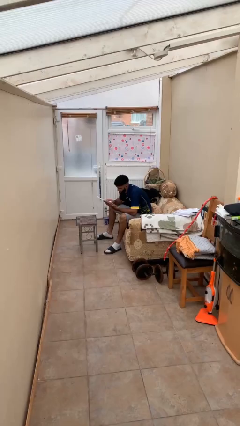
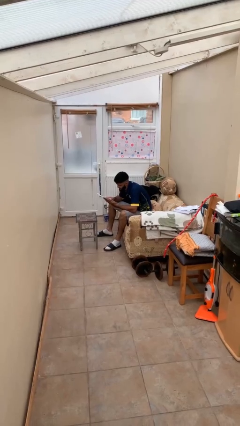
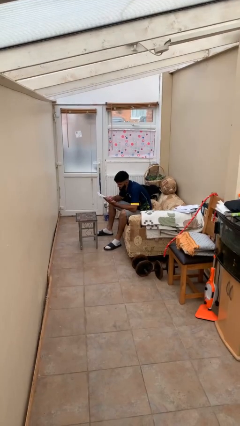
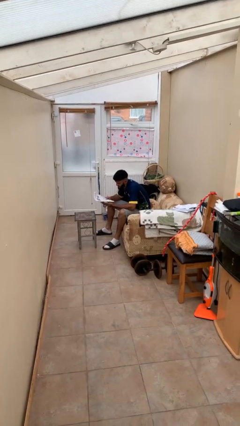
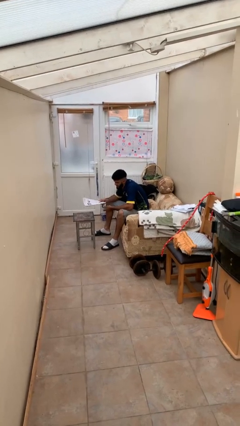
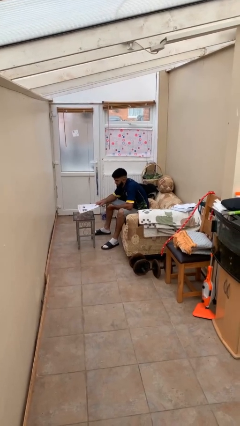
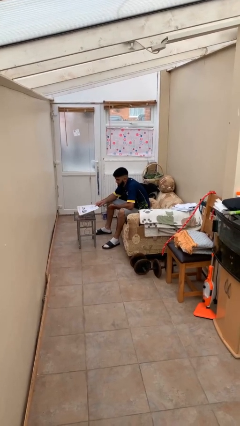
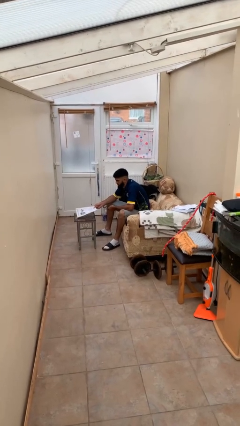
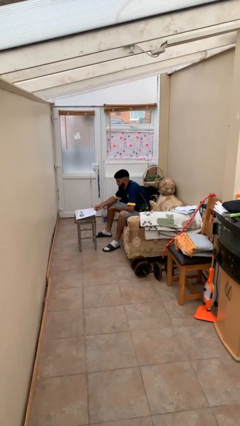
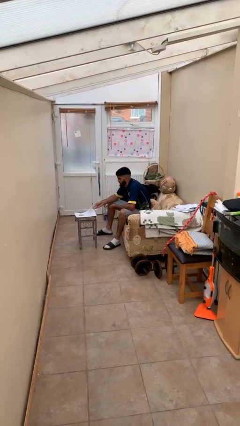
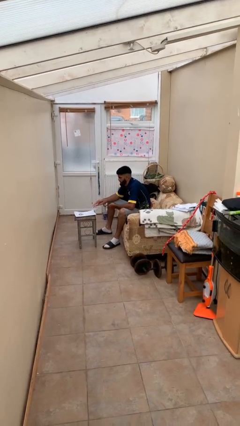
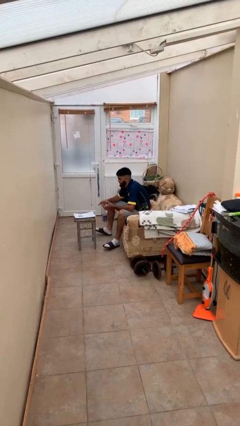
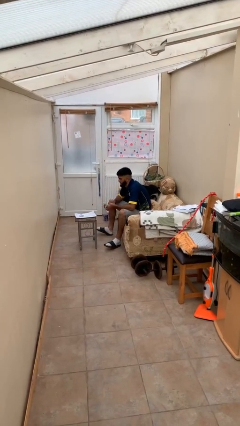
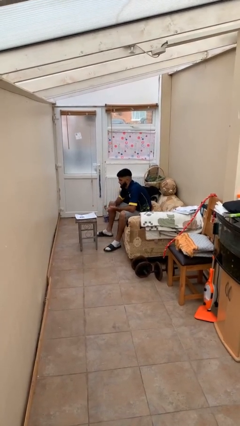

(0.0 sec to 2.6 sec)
person puts down object on table

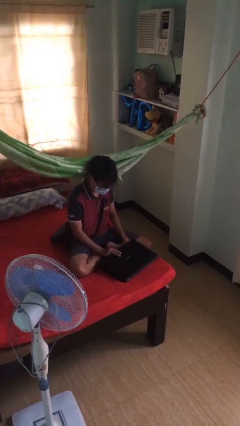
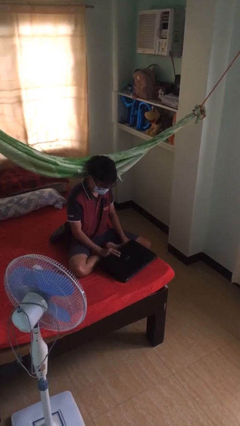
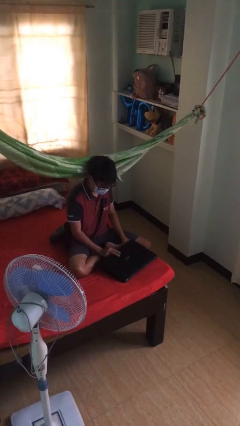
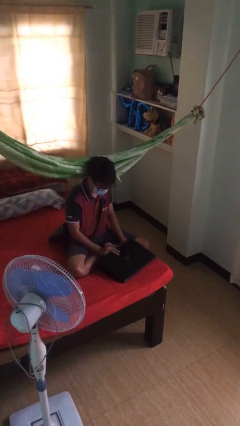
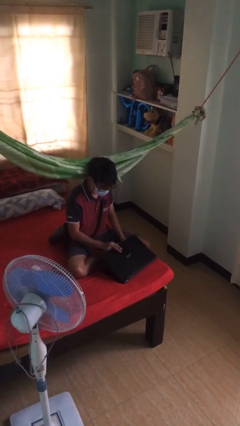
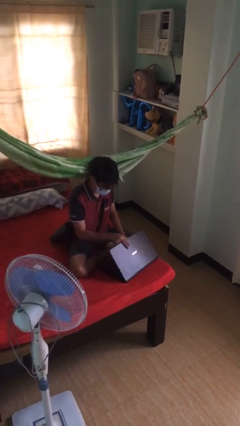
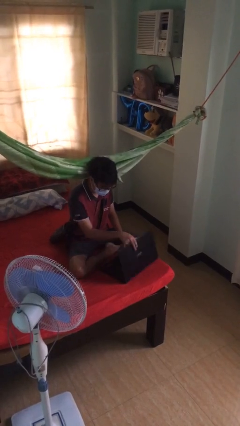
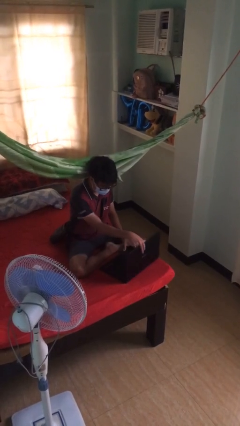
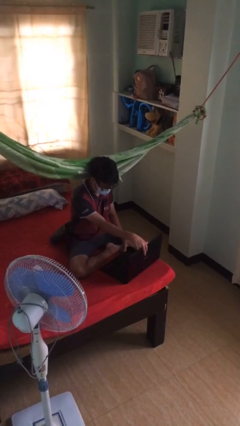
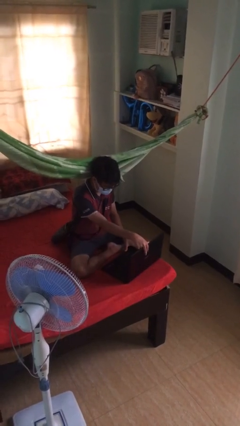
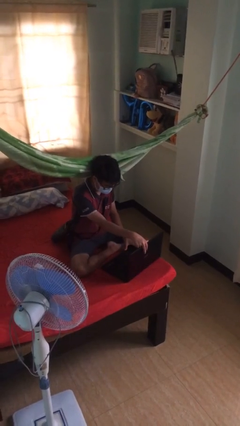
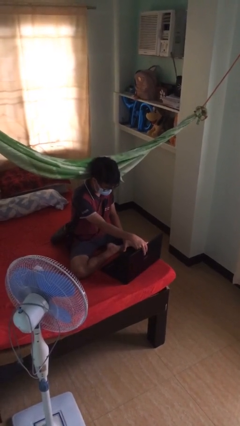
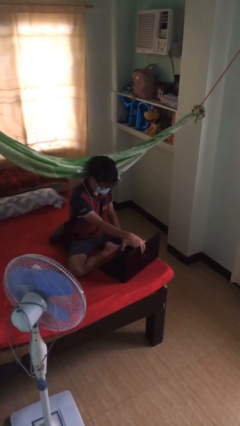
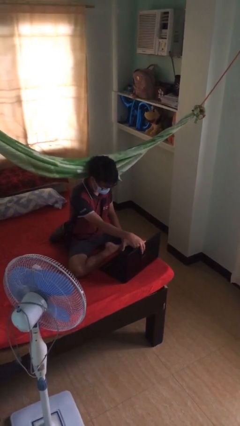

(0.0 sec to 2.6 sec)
person interacts with laptop

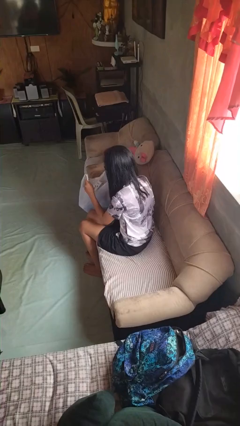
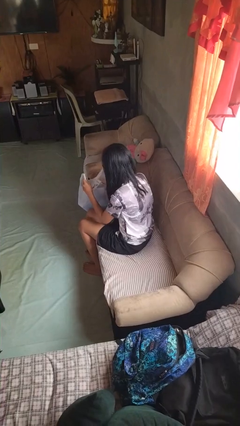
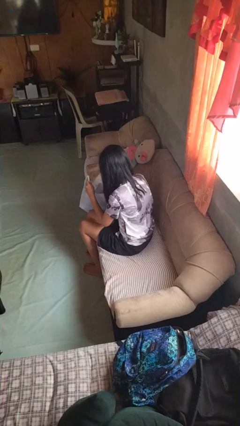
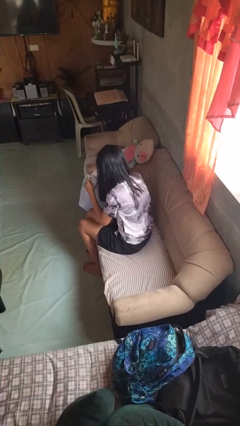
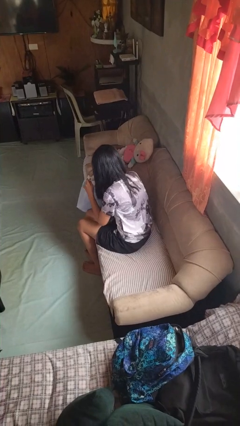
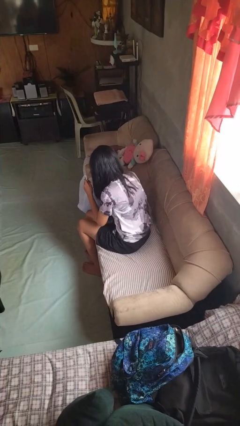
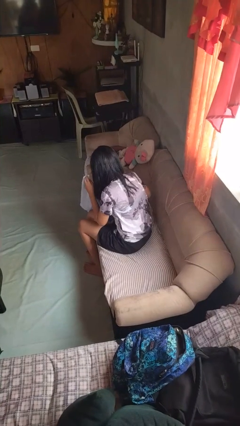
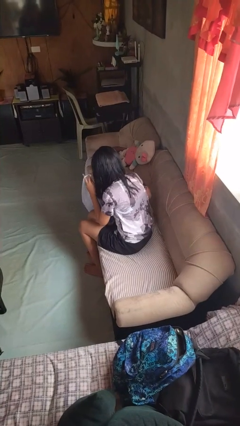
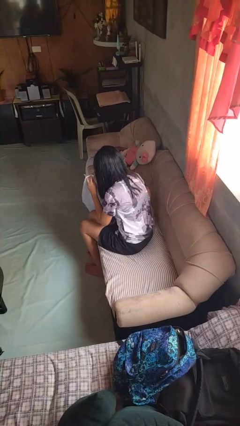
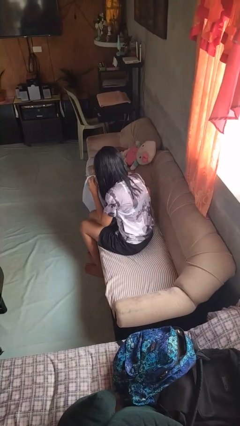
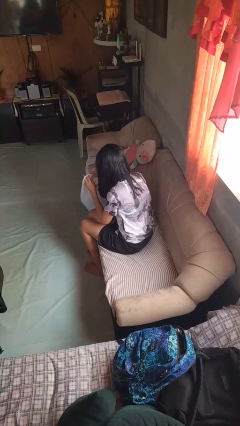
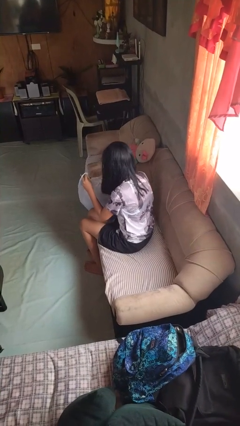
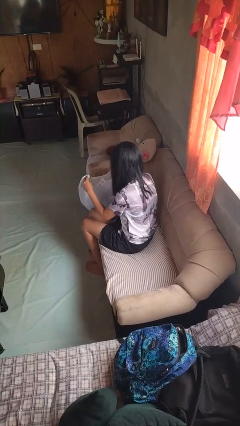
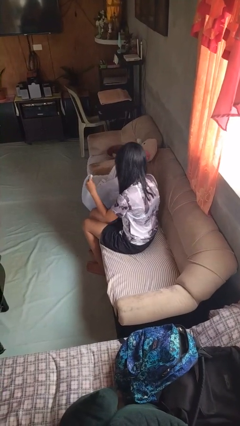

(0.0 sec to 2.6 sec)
person searches in bag

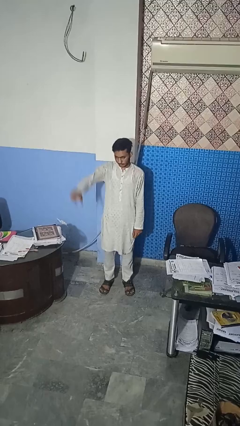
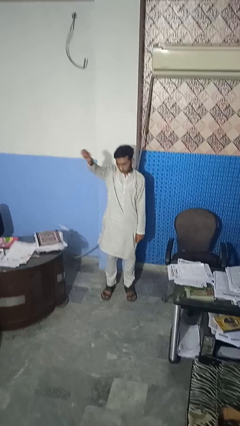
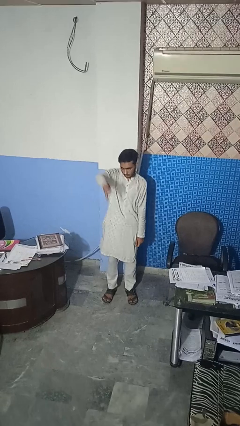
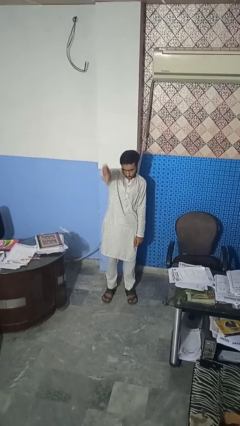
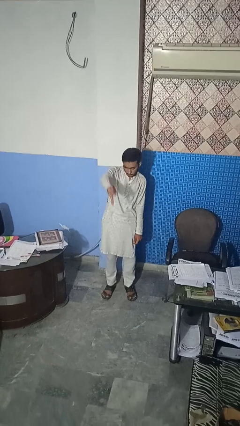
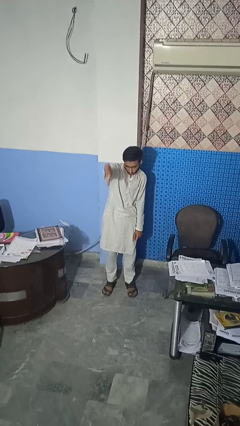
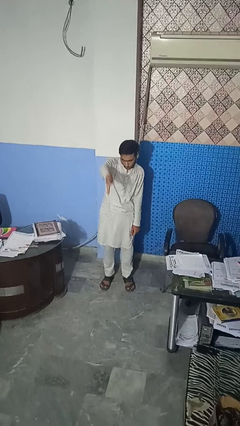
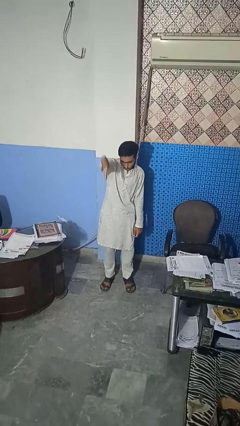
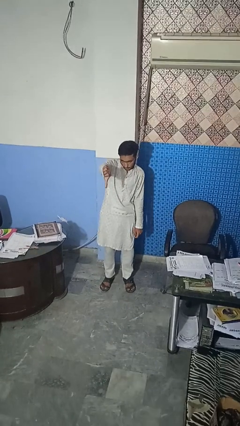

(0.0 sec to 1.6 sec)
person gestures thumbs down

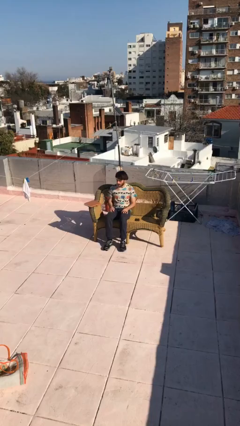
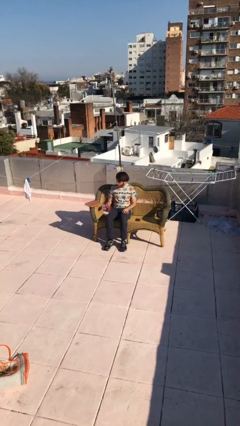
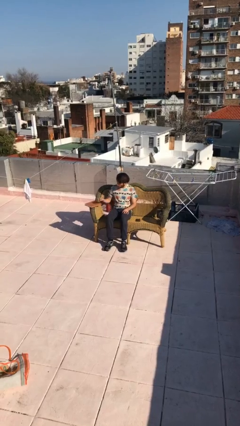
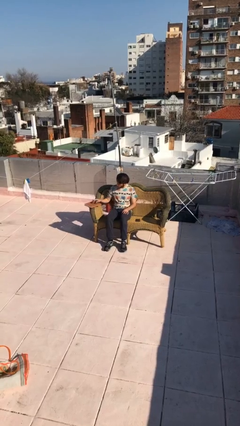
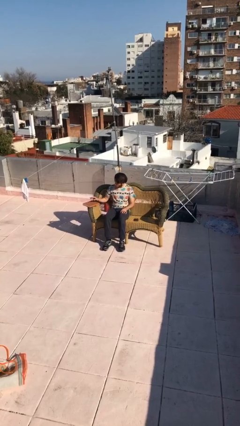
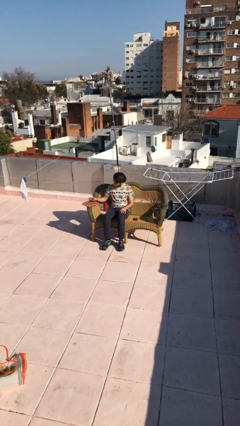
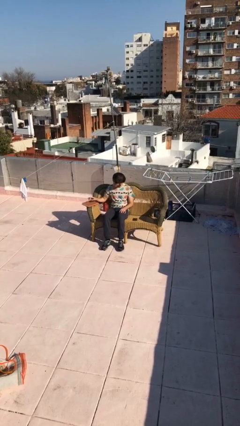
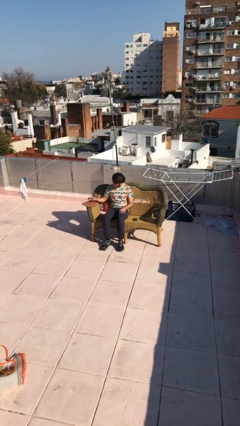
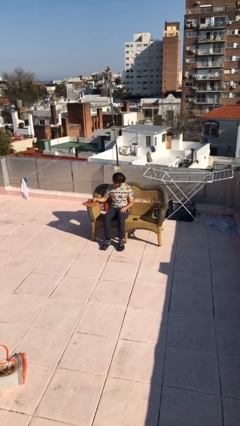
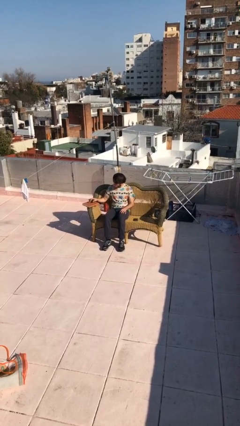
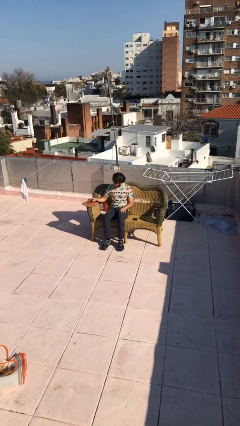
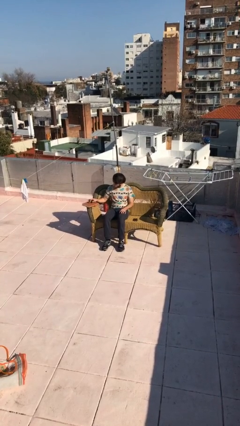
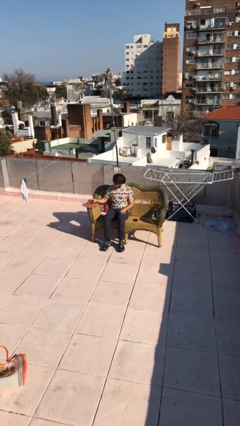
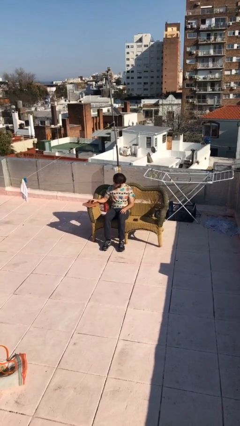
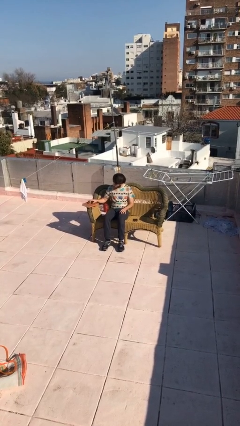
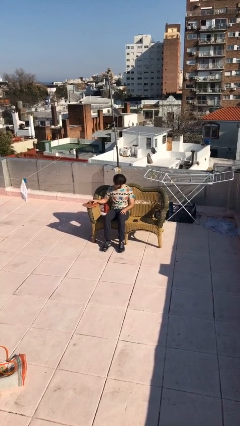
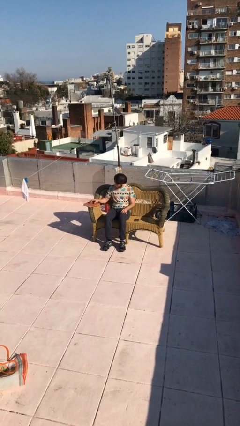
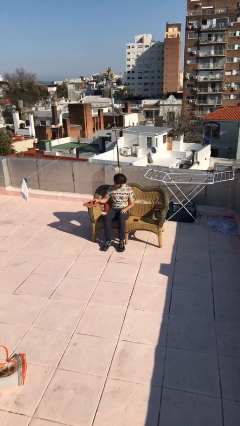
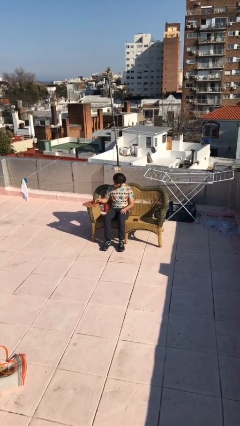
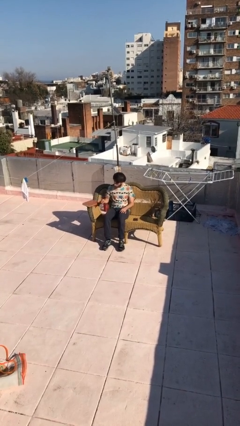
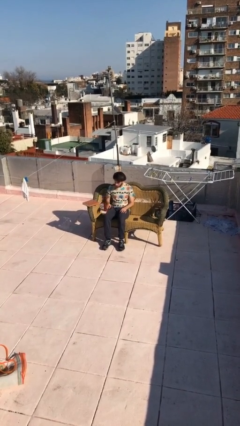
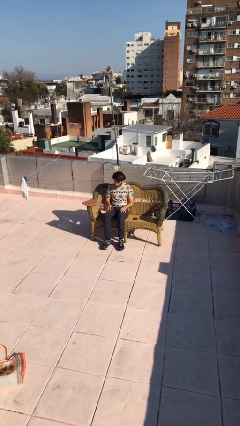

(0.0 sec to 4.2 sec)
person taps object with finger

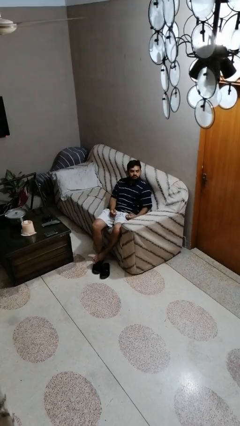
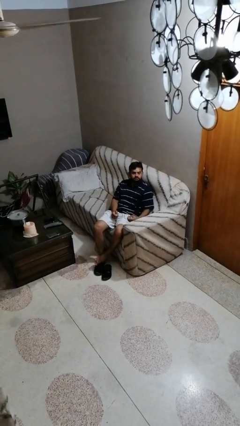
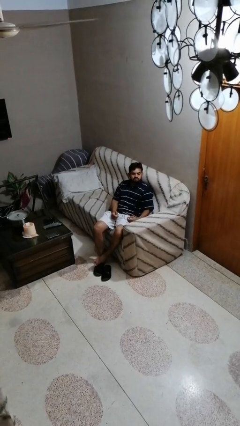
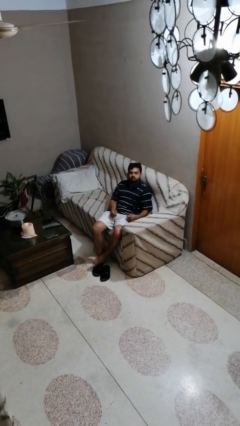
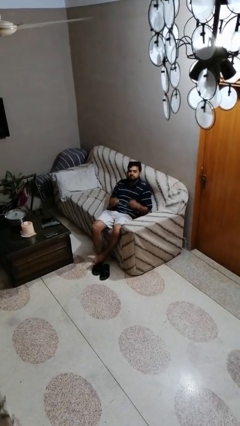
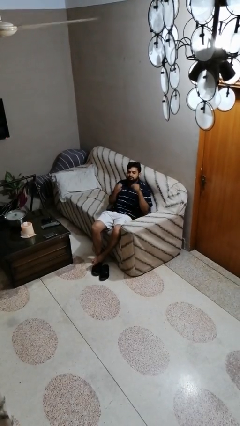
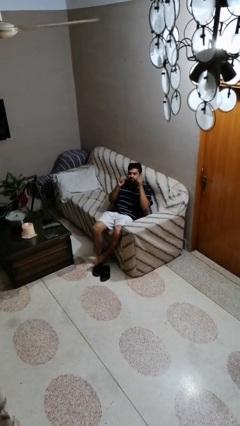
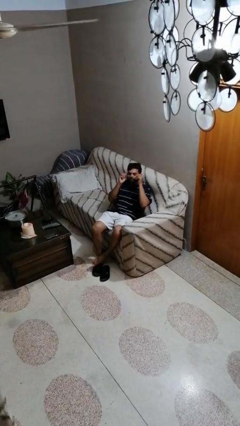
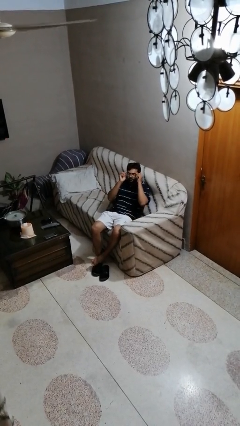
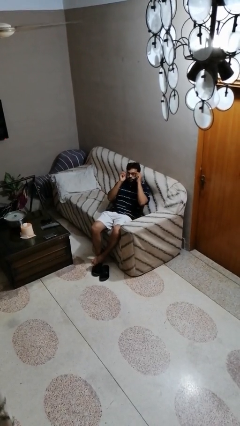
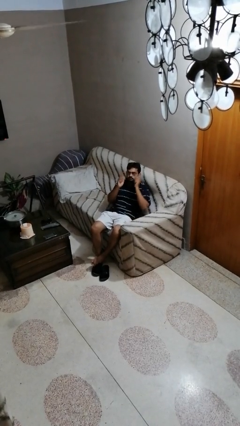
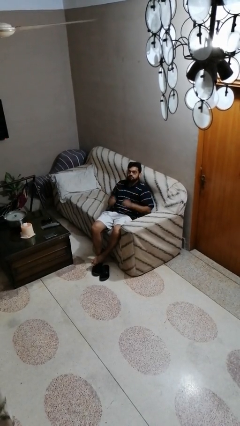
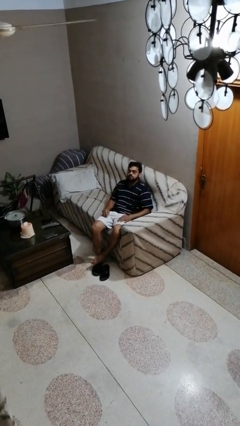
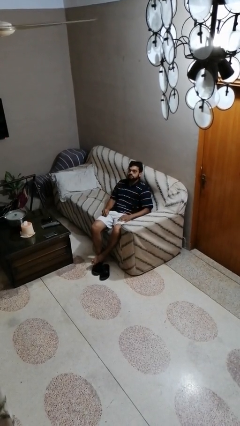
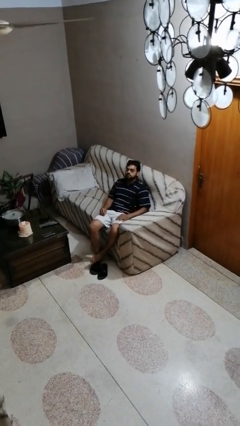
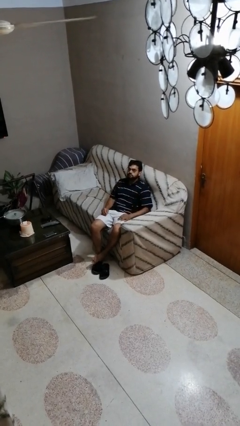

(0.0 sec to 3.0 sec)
person puts on glasses

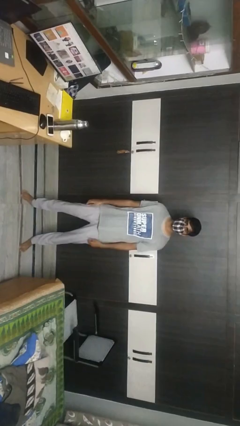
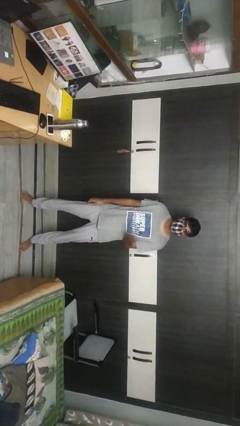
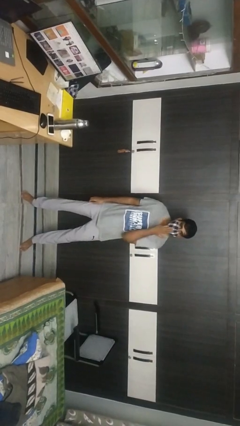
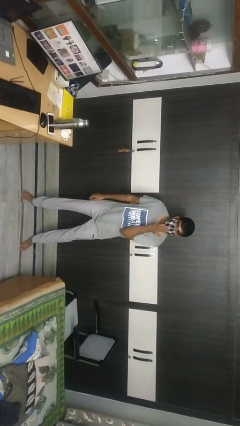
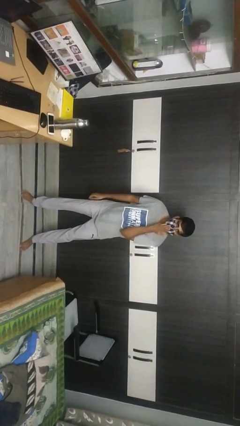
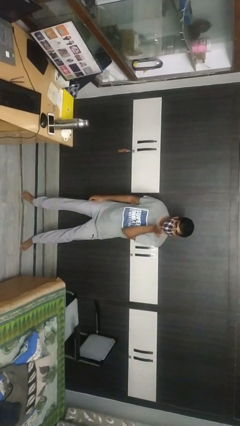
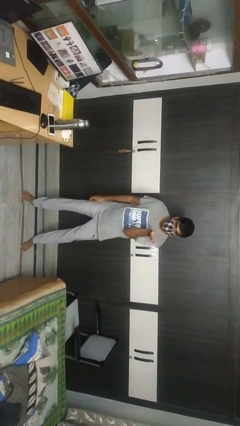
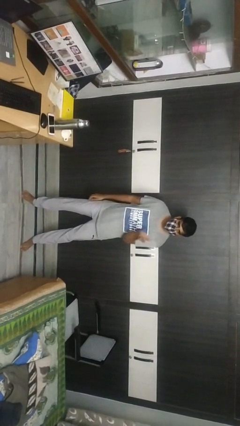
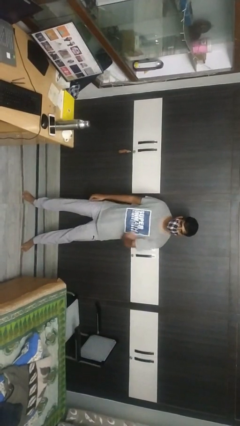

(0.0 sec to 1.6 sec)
person gestures blow kiss
